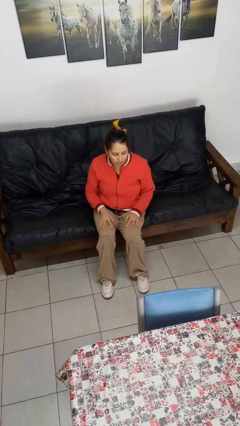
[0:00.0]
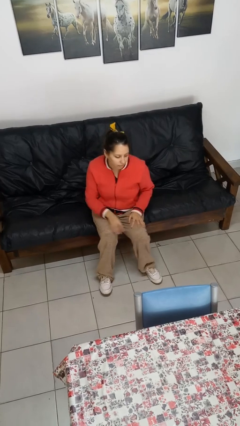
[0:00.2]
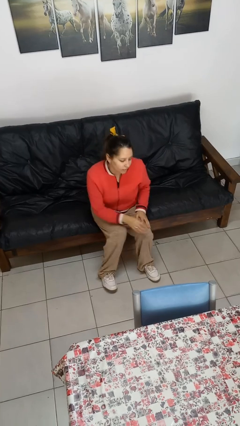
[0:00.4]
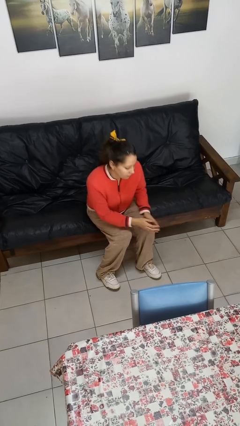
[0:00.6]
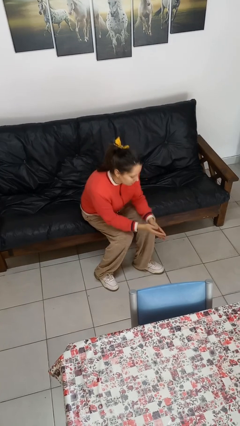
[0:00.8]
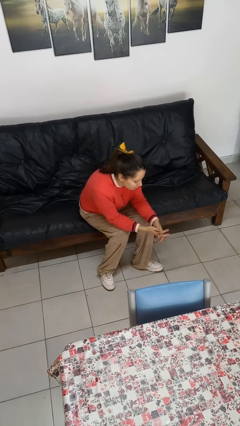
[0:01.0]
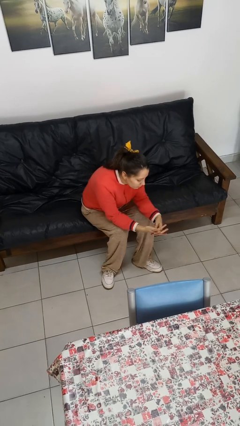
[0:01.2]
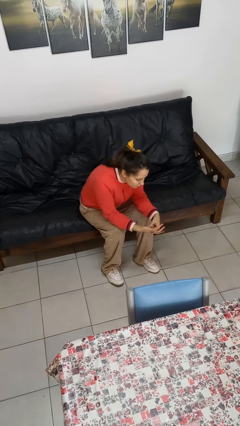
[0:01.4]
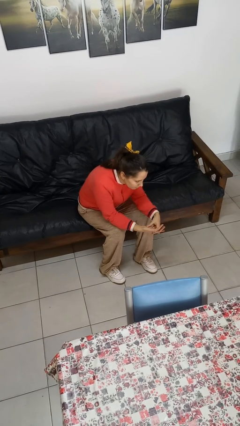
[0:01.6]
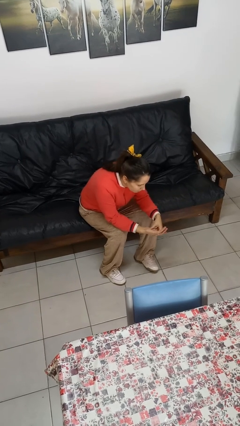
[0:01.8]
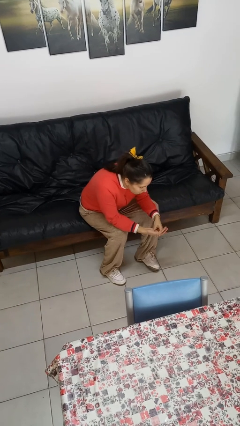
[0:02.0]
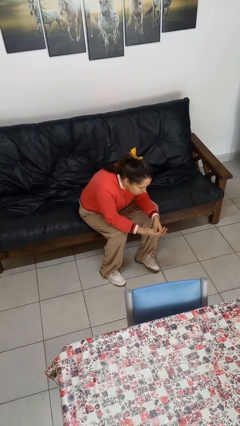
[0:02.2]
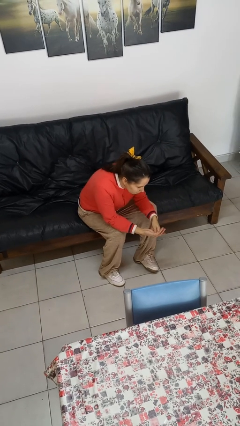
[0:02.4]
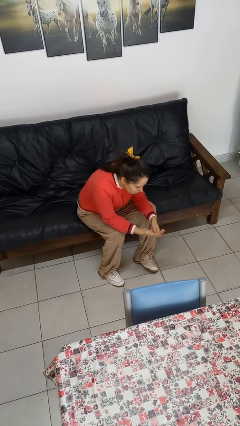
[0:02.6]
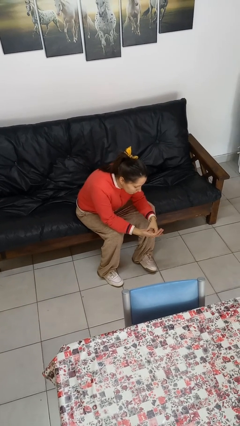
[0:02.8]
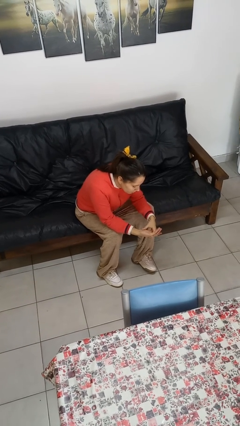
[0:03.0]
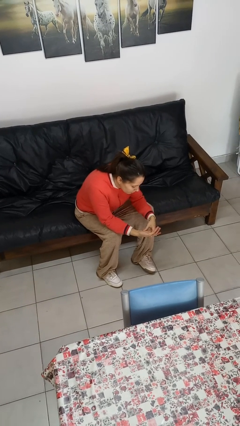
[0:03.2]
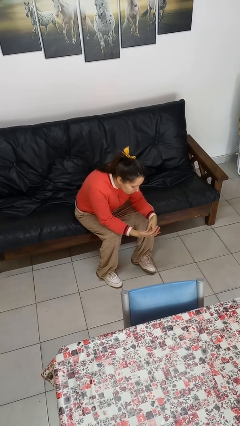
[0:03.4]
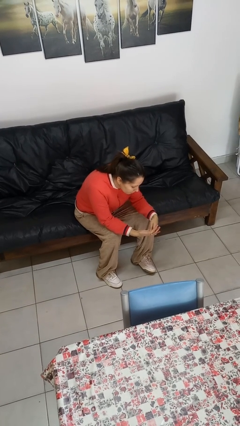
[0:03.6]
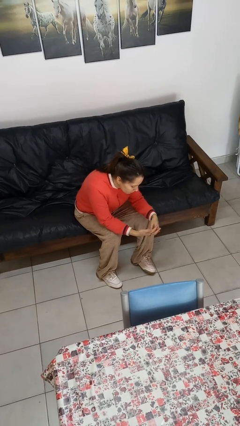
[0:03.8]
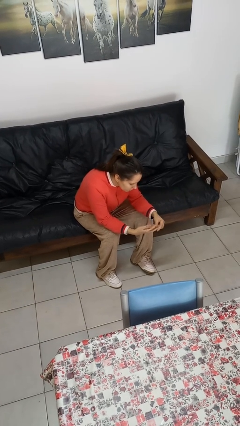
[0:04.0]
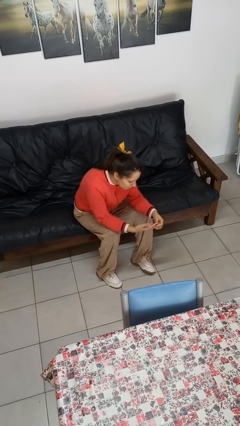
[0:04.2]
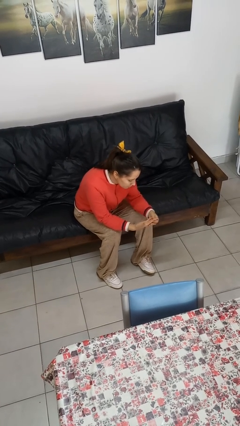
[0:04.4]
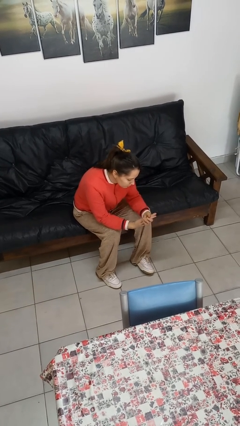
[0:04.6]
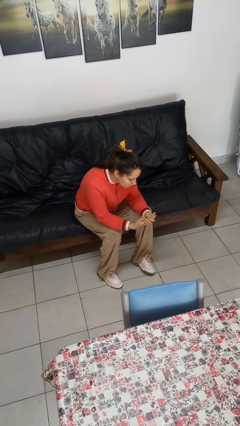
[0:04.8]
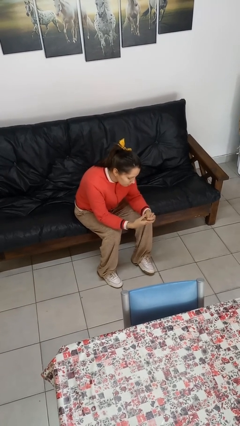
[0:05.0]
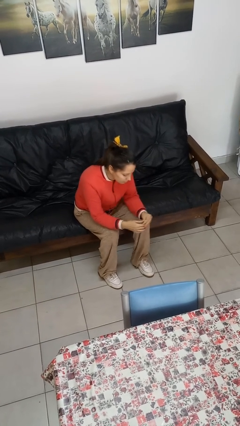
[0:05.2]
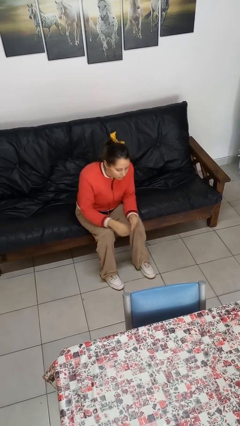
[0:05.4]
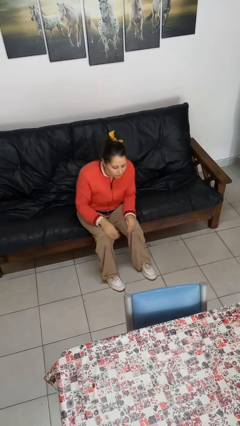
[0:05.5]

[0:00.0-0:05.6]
person looks at hands in lap

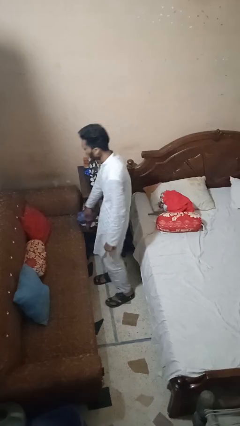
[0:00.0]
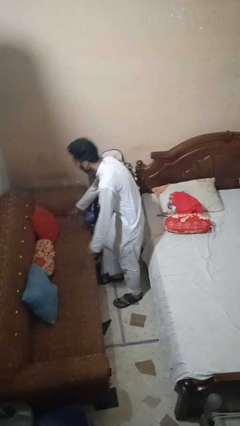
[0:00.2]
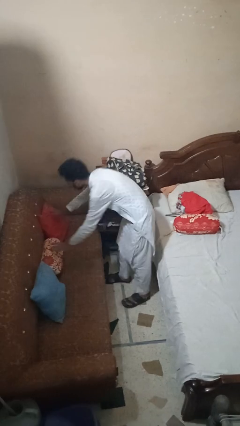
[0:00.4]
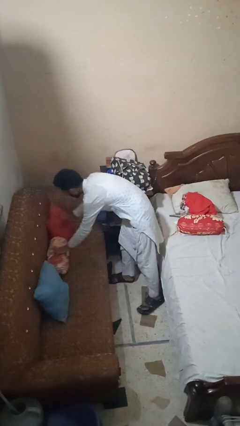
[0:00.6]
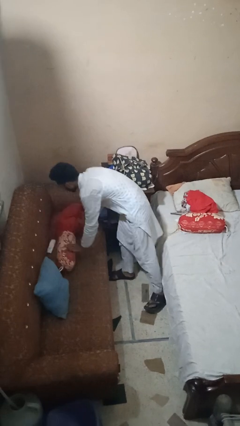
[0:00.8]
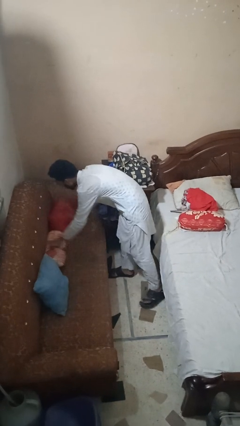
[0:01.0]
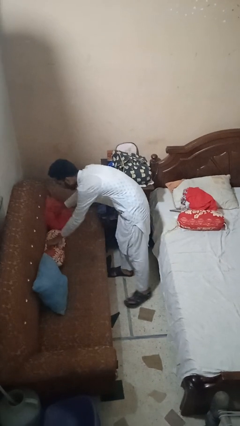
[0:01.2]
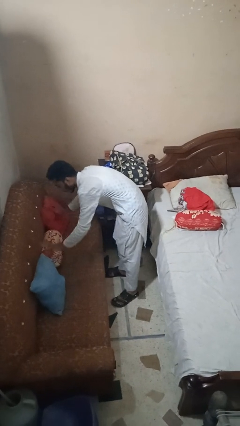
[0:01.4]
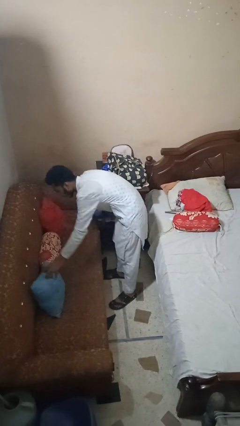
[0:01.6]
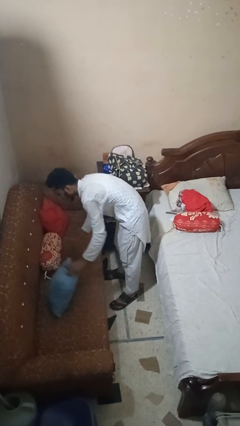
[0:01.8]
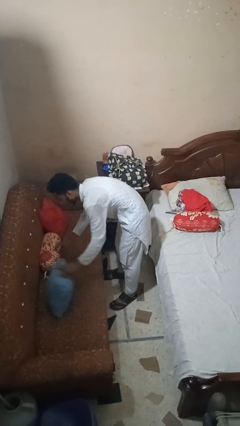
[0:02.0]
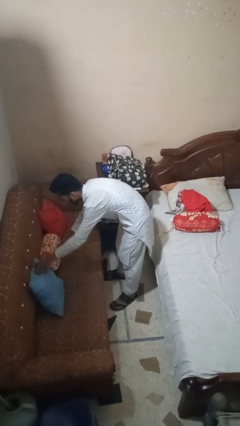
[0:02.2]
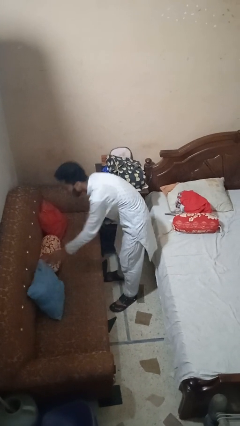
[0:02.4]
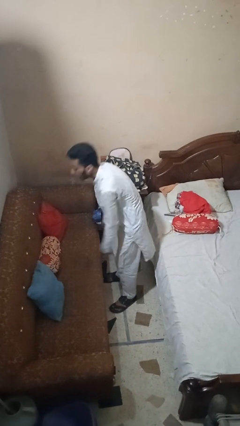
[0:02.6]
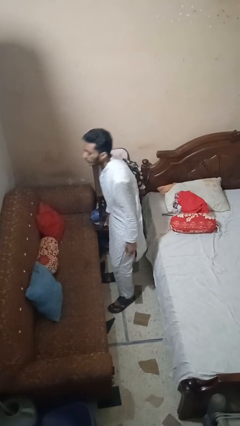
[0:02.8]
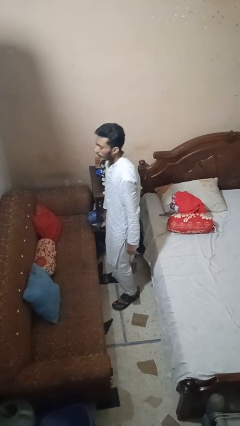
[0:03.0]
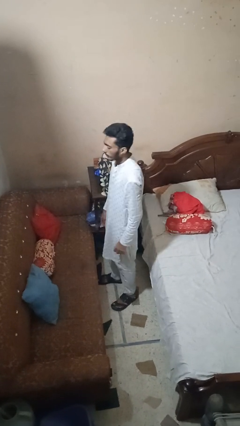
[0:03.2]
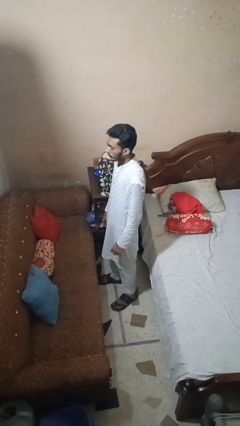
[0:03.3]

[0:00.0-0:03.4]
person searches in couch

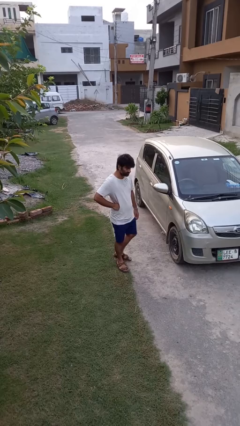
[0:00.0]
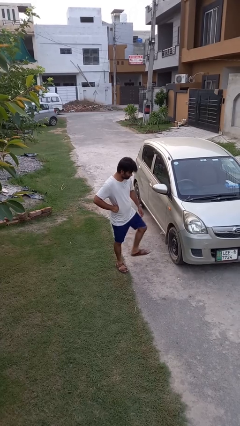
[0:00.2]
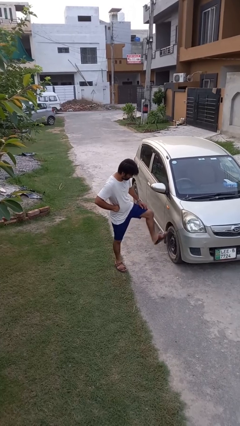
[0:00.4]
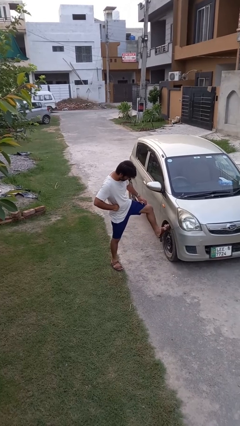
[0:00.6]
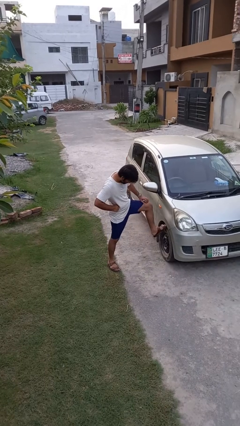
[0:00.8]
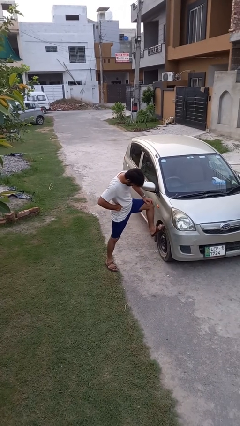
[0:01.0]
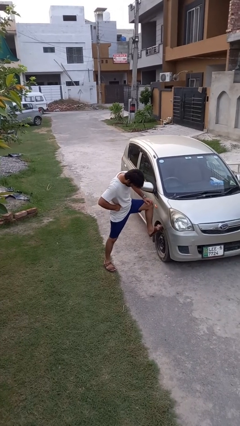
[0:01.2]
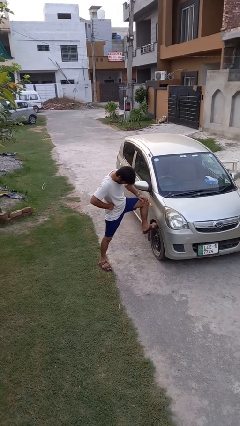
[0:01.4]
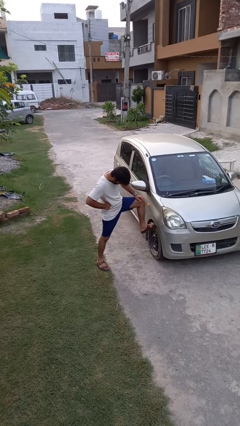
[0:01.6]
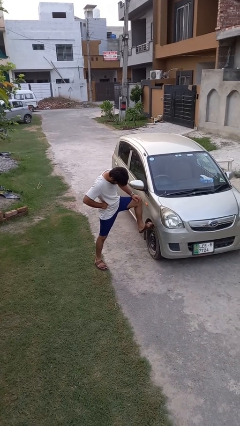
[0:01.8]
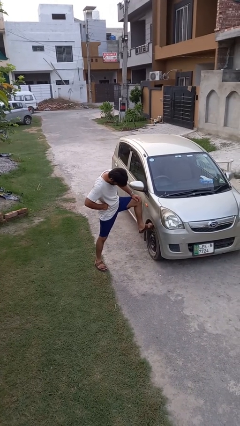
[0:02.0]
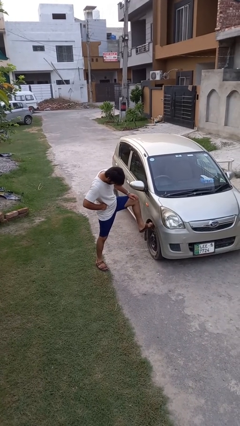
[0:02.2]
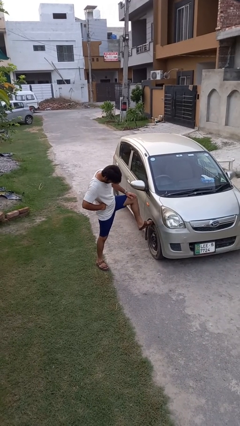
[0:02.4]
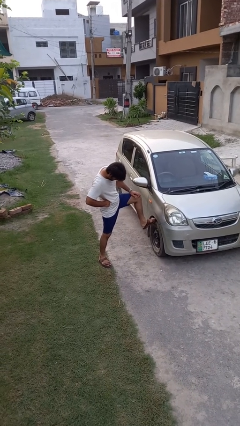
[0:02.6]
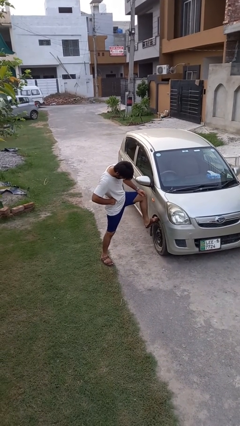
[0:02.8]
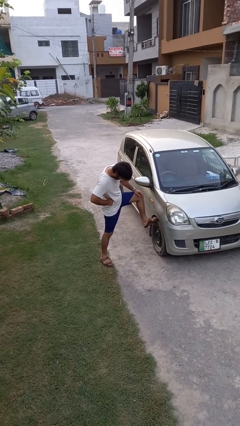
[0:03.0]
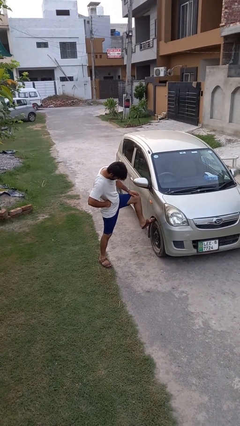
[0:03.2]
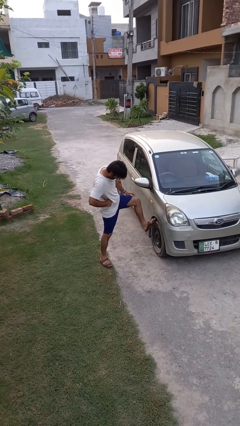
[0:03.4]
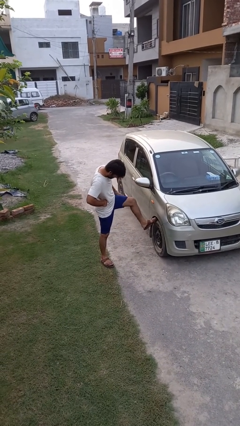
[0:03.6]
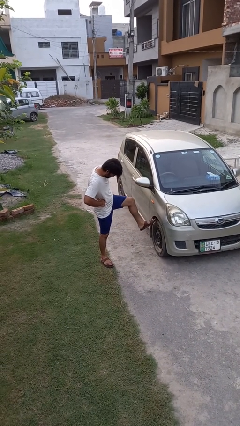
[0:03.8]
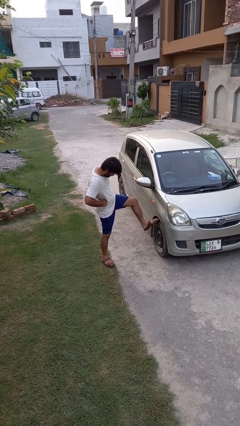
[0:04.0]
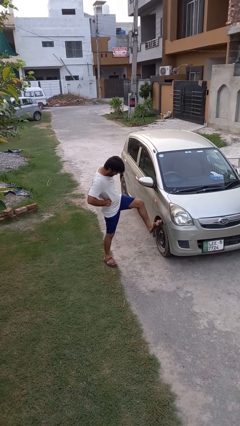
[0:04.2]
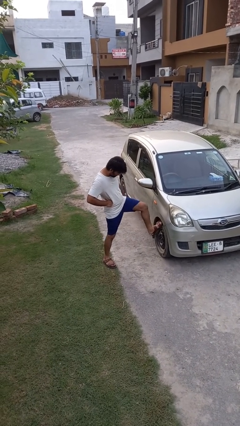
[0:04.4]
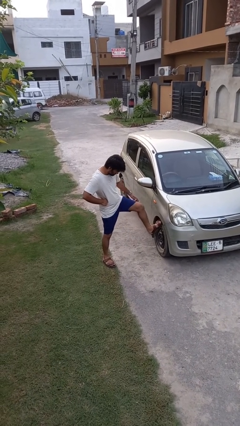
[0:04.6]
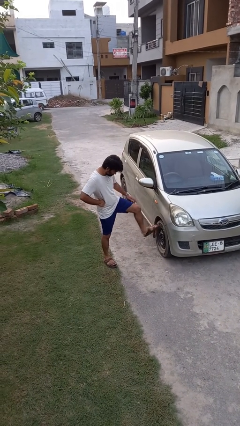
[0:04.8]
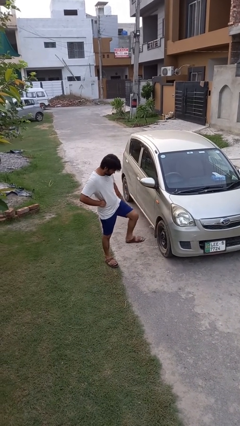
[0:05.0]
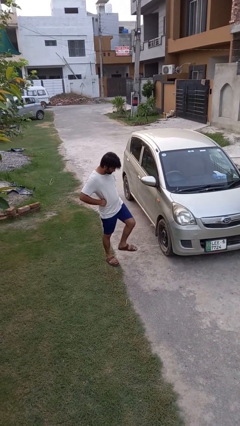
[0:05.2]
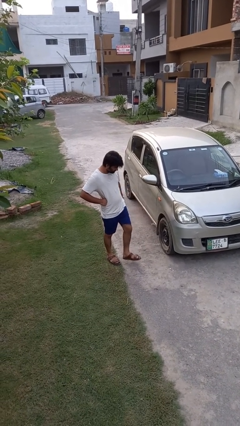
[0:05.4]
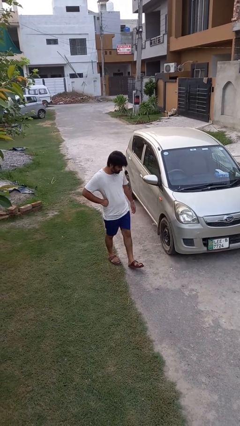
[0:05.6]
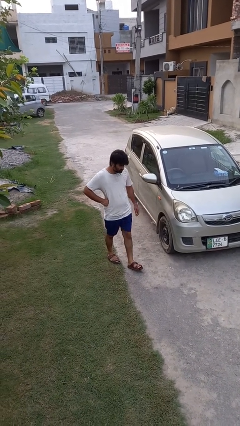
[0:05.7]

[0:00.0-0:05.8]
person kicks car tires

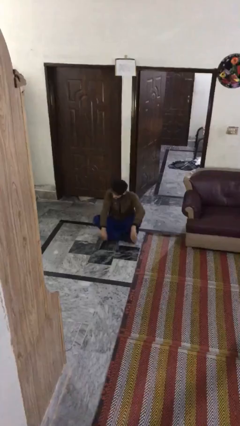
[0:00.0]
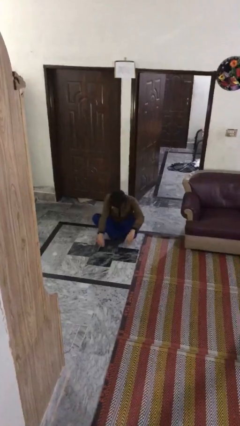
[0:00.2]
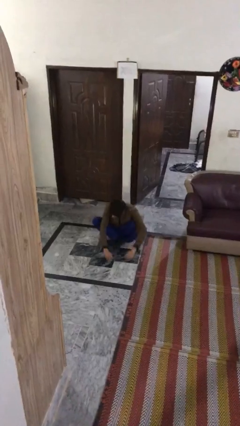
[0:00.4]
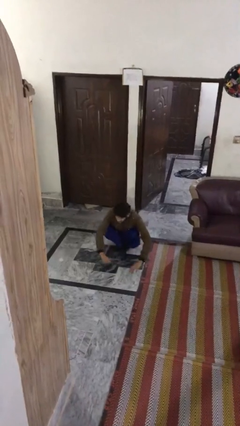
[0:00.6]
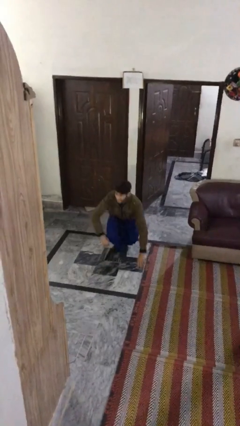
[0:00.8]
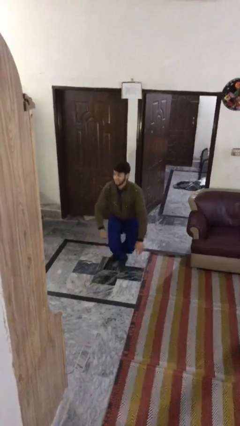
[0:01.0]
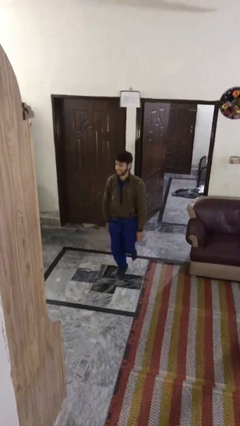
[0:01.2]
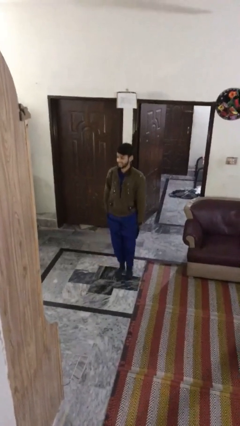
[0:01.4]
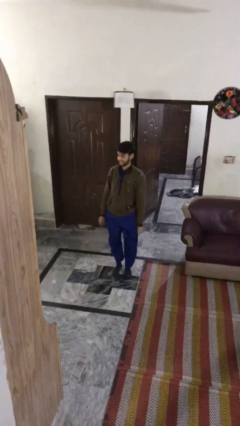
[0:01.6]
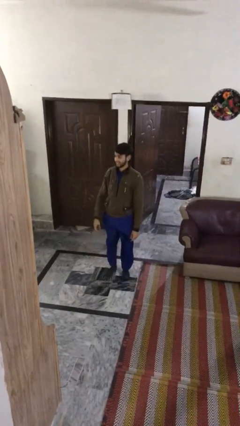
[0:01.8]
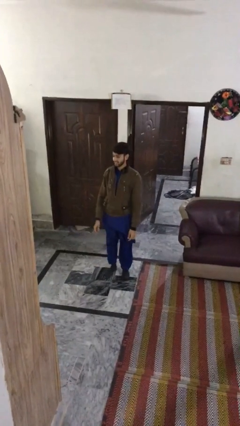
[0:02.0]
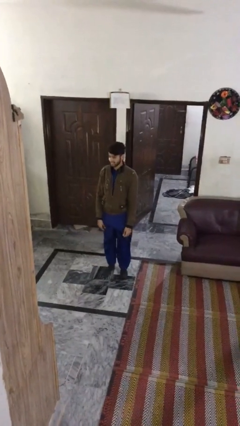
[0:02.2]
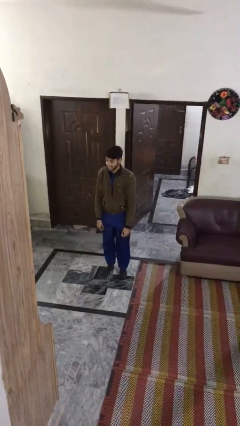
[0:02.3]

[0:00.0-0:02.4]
person stands up

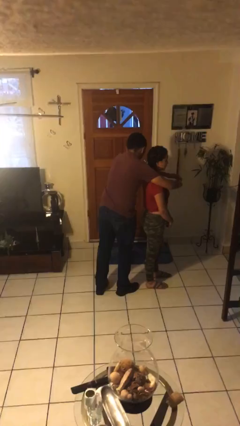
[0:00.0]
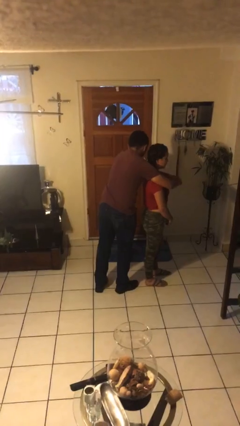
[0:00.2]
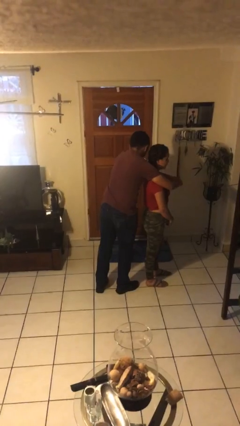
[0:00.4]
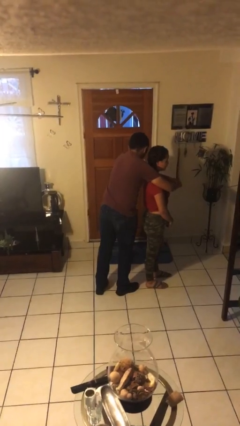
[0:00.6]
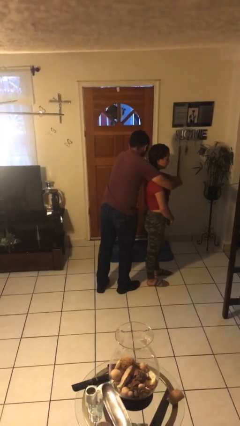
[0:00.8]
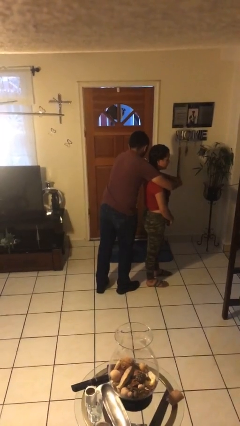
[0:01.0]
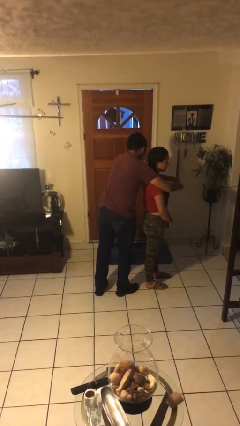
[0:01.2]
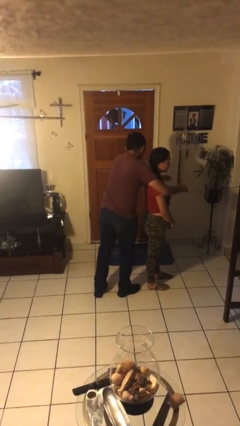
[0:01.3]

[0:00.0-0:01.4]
person hugs person from behind
